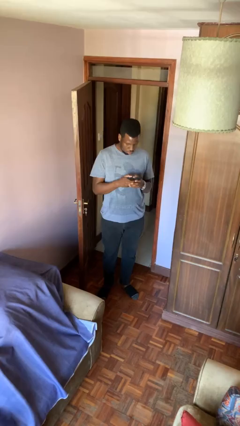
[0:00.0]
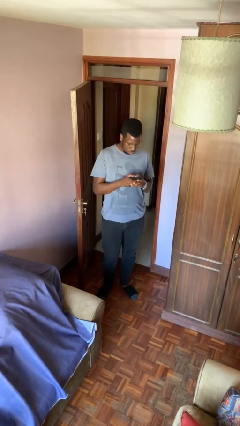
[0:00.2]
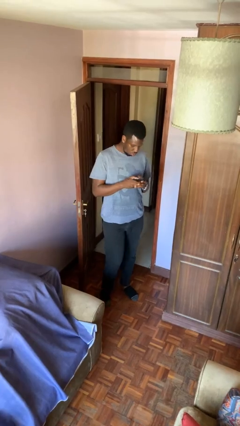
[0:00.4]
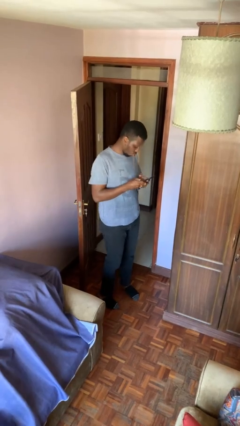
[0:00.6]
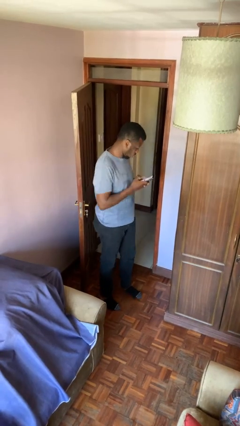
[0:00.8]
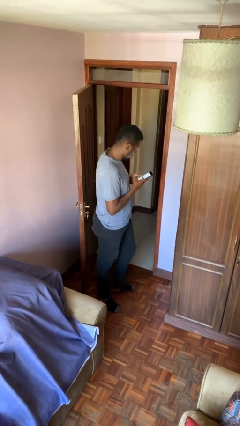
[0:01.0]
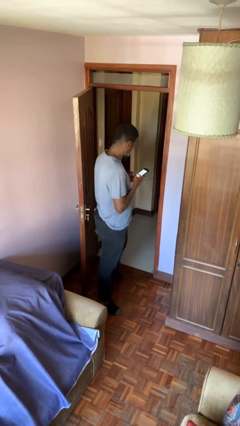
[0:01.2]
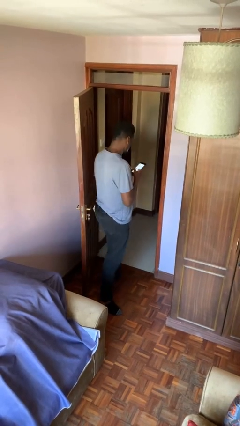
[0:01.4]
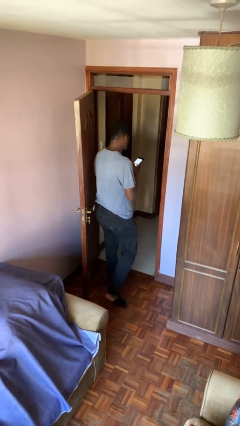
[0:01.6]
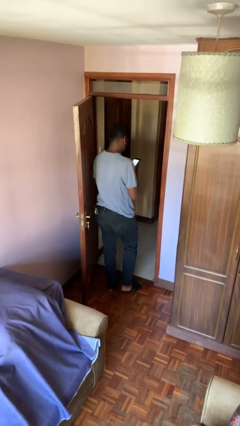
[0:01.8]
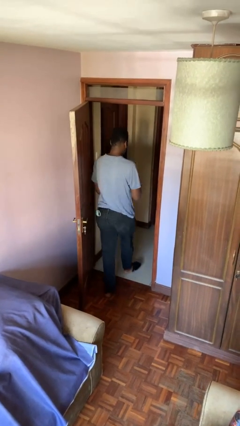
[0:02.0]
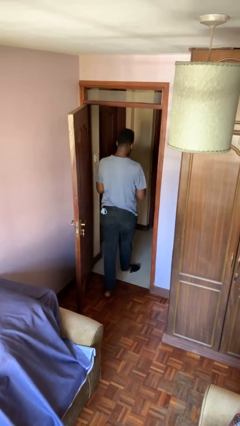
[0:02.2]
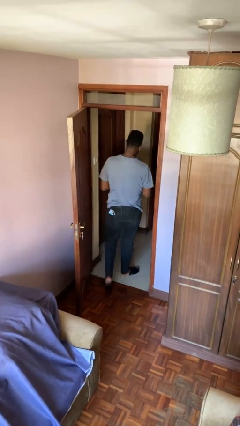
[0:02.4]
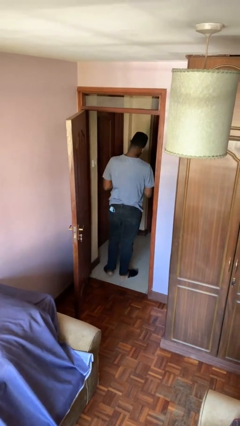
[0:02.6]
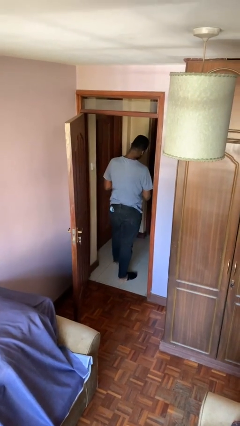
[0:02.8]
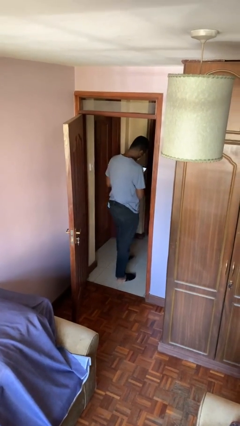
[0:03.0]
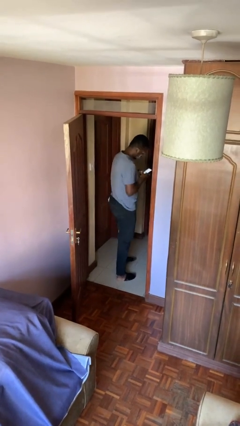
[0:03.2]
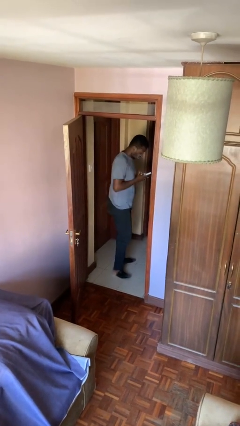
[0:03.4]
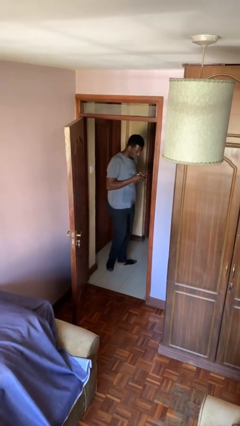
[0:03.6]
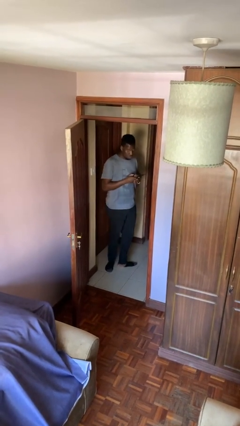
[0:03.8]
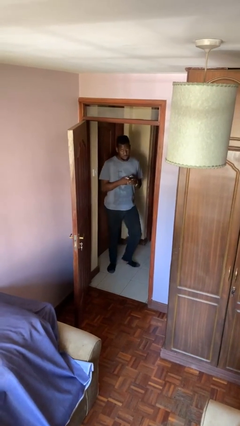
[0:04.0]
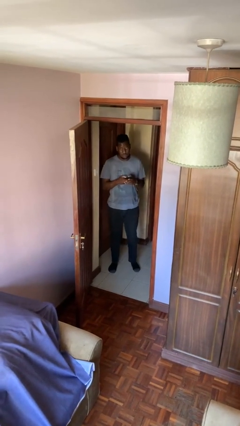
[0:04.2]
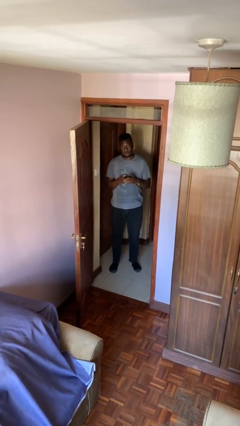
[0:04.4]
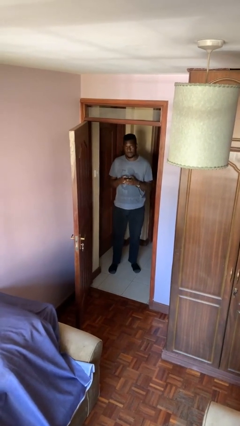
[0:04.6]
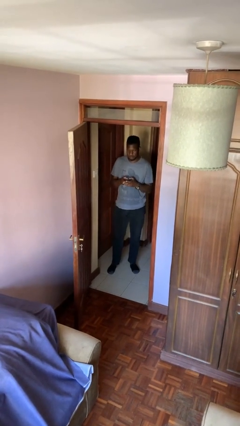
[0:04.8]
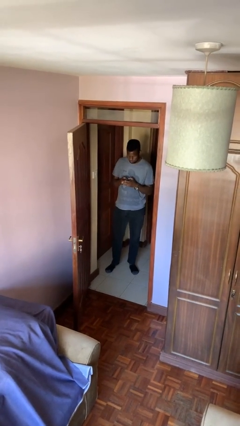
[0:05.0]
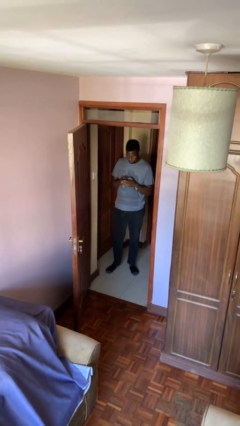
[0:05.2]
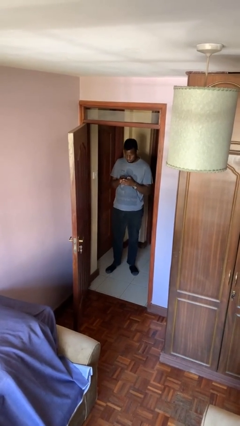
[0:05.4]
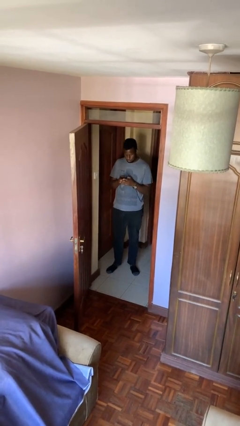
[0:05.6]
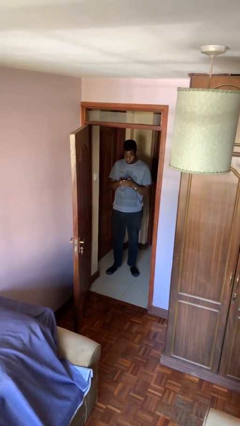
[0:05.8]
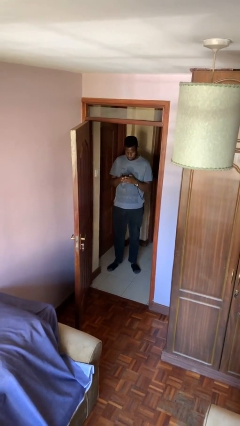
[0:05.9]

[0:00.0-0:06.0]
person exits scene through structure

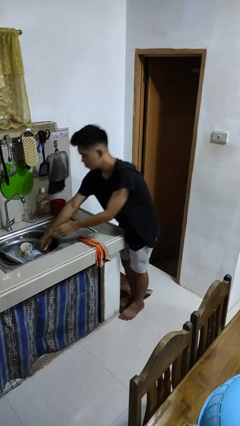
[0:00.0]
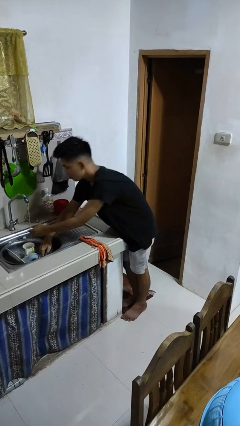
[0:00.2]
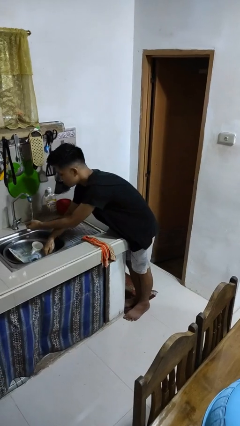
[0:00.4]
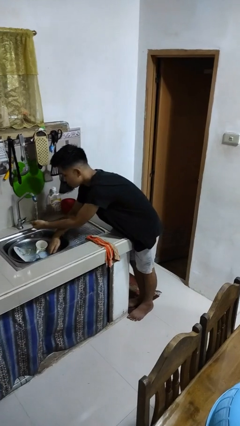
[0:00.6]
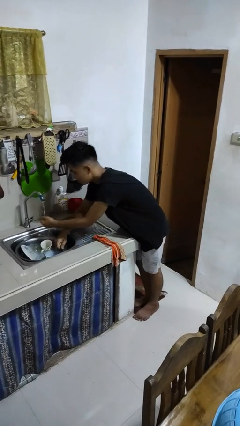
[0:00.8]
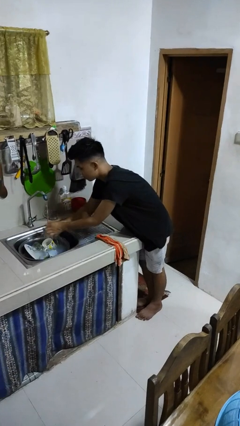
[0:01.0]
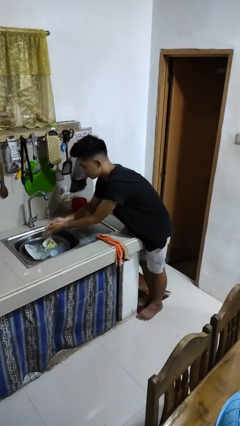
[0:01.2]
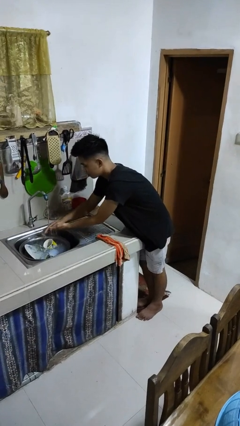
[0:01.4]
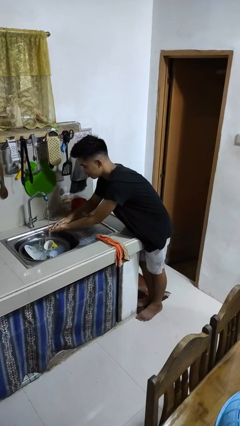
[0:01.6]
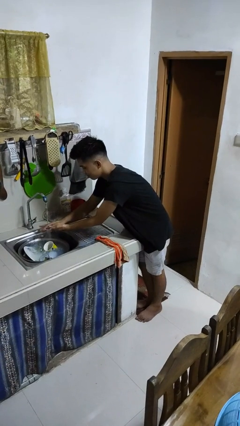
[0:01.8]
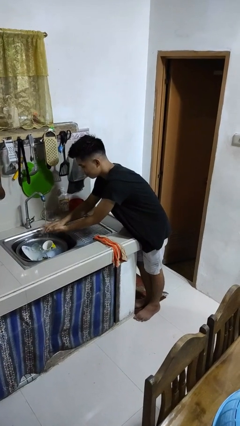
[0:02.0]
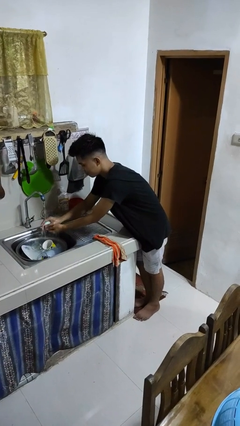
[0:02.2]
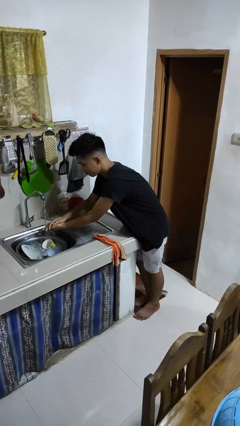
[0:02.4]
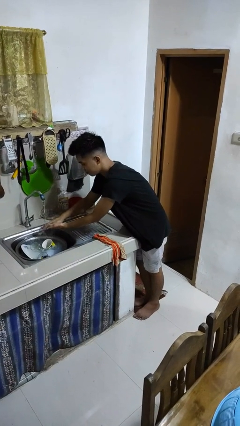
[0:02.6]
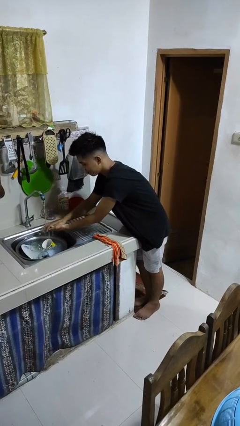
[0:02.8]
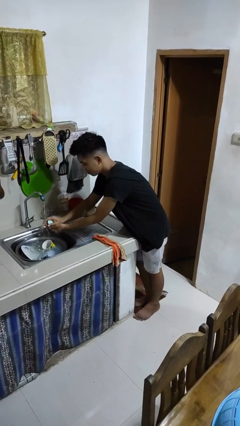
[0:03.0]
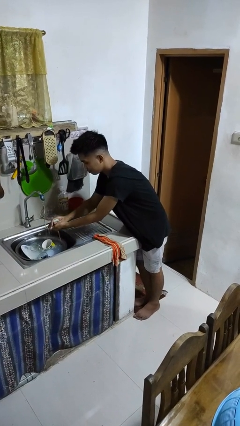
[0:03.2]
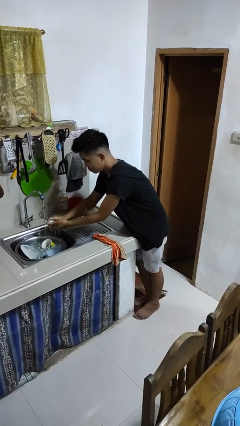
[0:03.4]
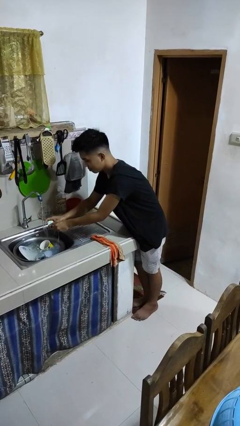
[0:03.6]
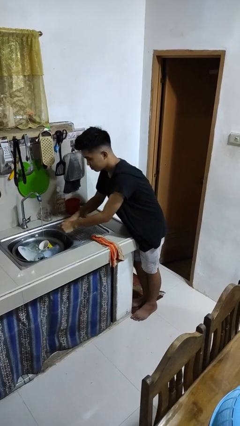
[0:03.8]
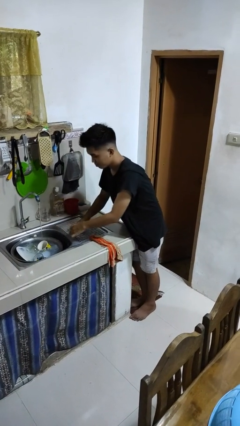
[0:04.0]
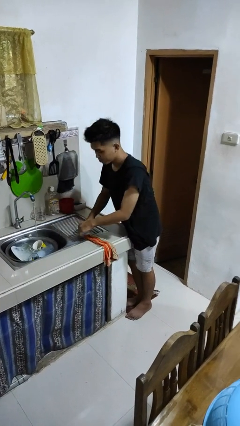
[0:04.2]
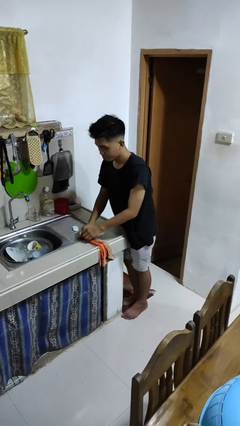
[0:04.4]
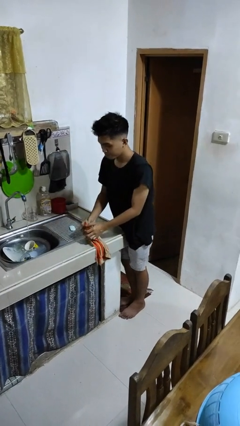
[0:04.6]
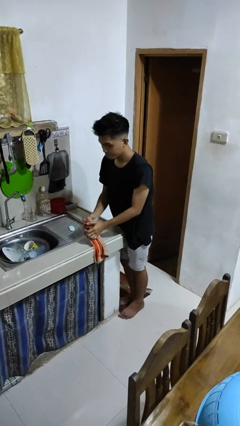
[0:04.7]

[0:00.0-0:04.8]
person washes hands

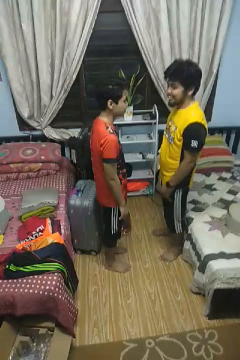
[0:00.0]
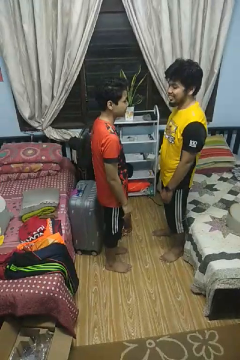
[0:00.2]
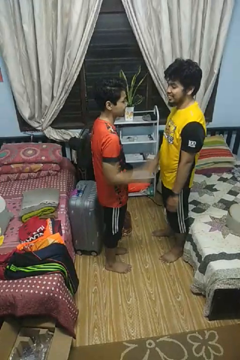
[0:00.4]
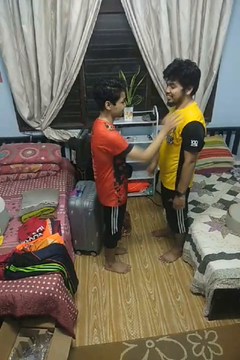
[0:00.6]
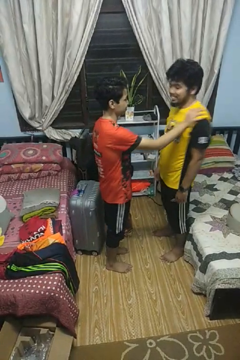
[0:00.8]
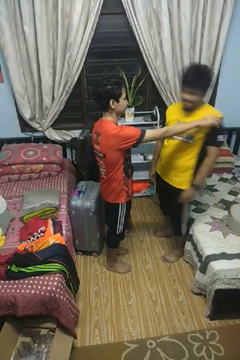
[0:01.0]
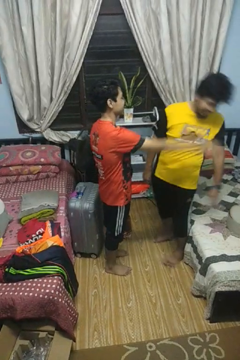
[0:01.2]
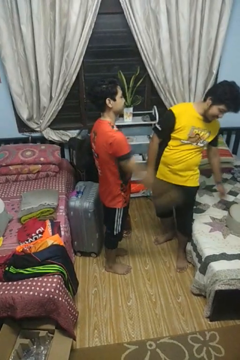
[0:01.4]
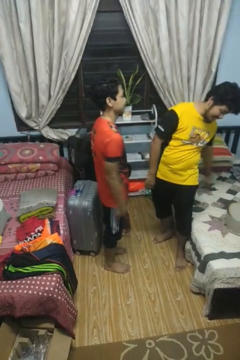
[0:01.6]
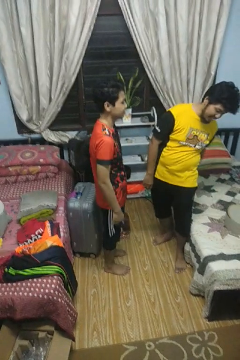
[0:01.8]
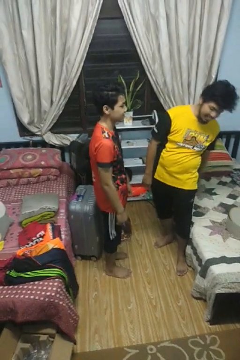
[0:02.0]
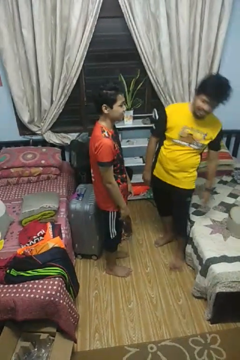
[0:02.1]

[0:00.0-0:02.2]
person shoves person

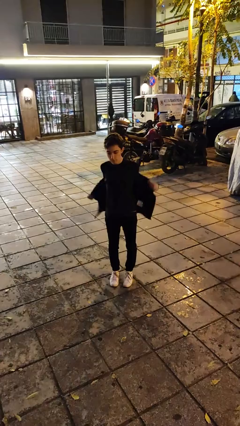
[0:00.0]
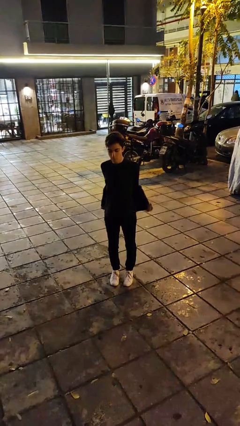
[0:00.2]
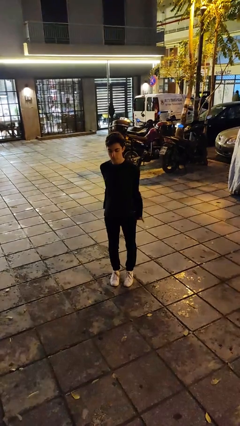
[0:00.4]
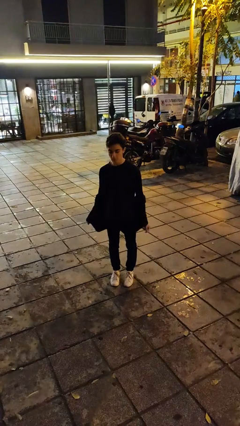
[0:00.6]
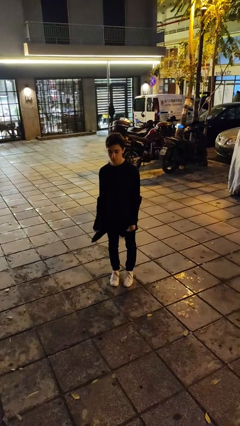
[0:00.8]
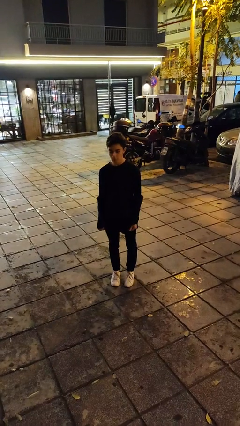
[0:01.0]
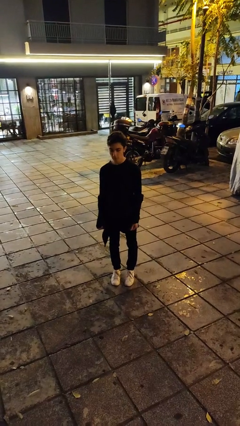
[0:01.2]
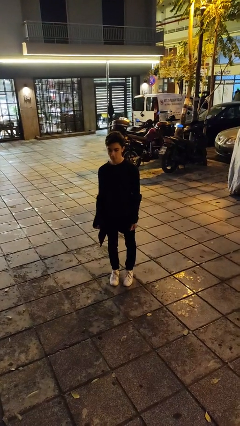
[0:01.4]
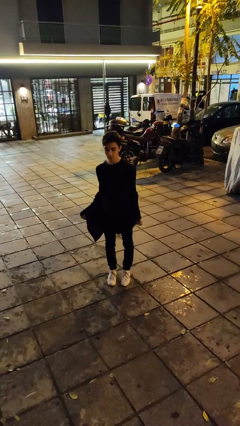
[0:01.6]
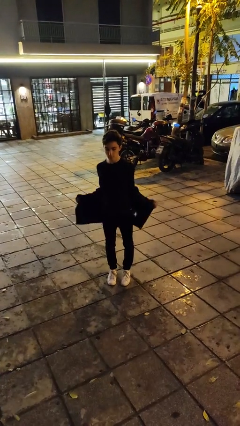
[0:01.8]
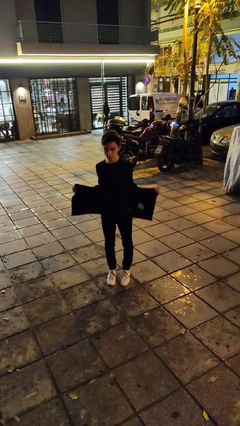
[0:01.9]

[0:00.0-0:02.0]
person takes off jacket

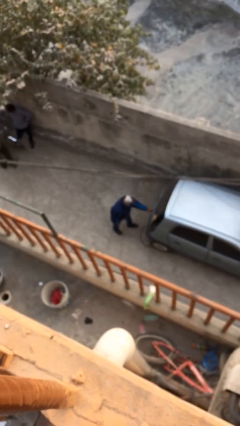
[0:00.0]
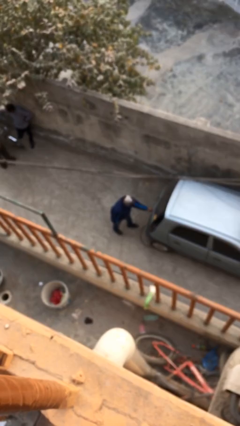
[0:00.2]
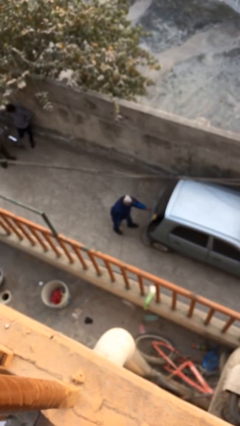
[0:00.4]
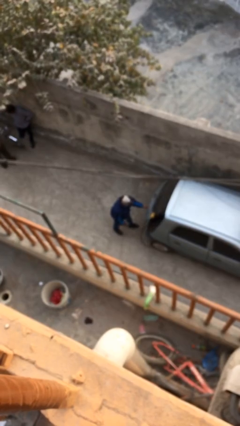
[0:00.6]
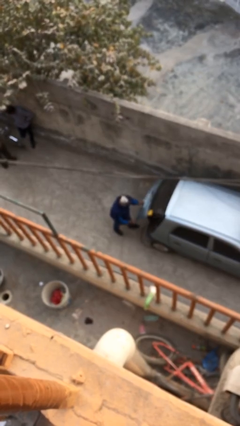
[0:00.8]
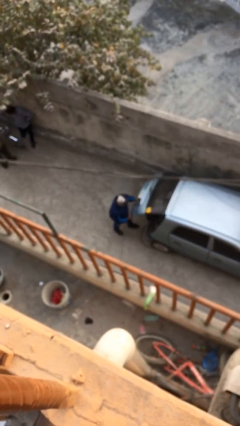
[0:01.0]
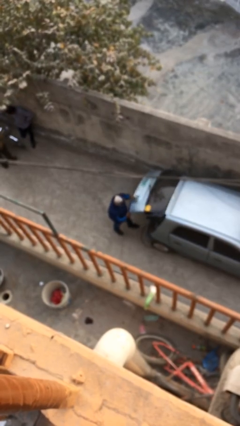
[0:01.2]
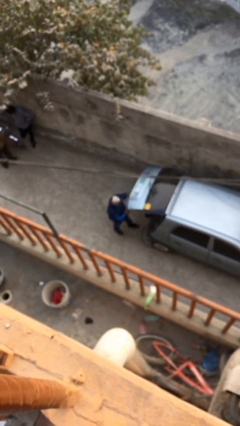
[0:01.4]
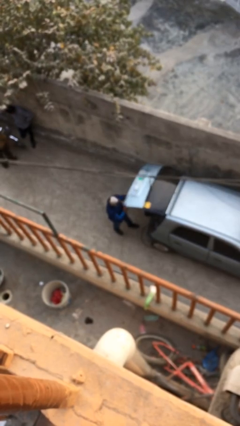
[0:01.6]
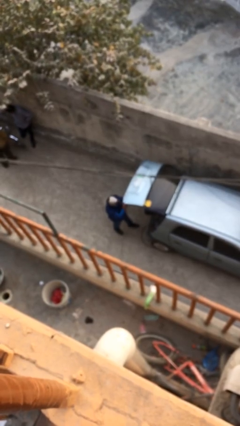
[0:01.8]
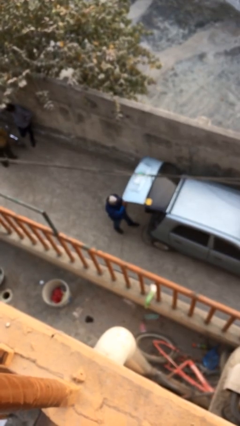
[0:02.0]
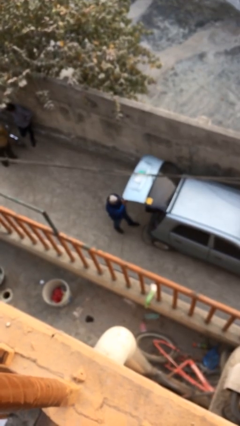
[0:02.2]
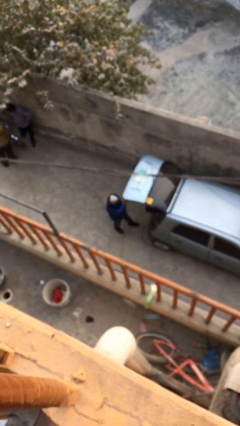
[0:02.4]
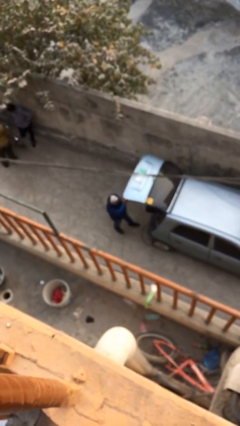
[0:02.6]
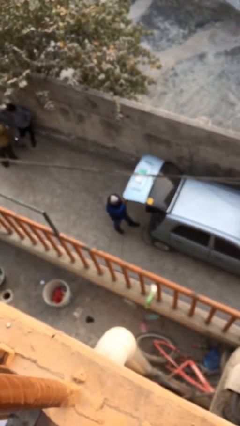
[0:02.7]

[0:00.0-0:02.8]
person opens car trunk
